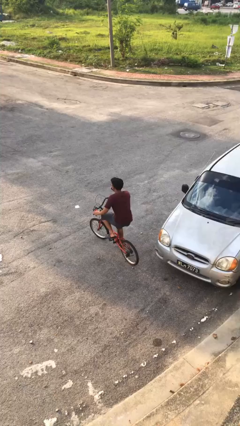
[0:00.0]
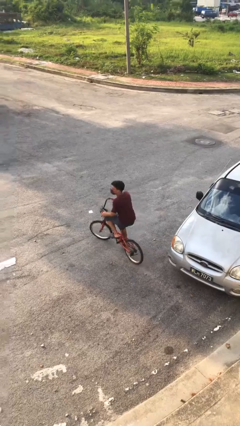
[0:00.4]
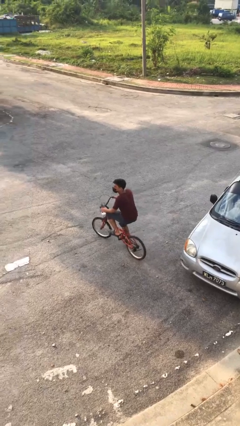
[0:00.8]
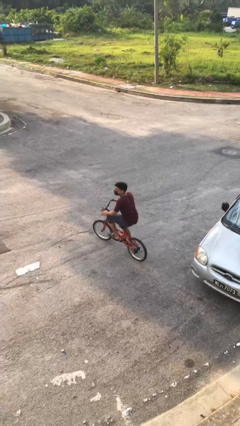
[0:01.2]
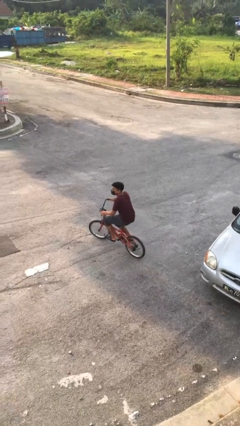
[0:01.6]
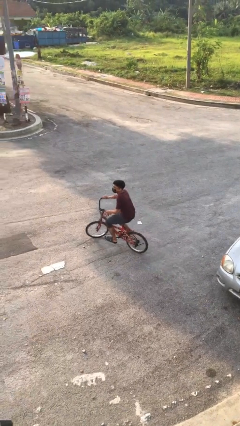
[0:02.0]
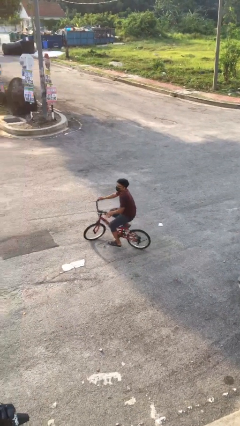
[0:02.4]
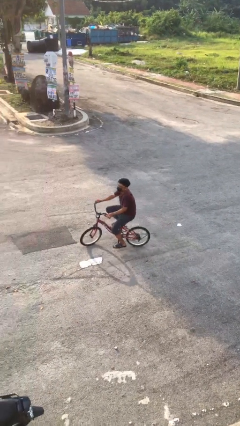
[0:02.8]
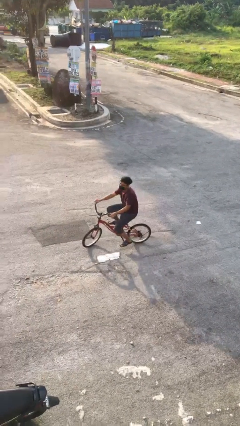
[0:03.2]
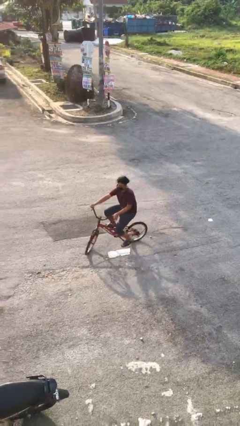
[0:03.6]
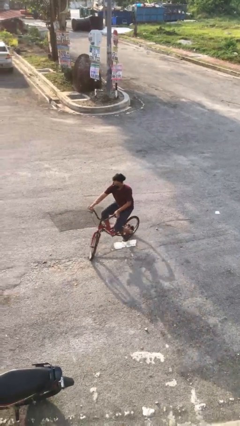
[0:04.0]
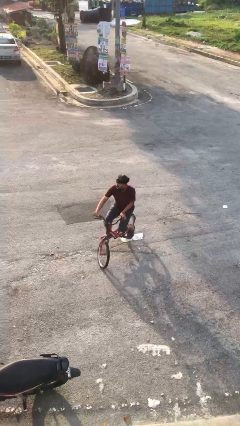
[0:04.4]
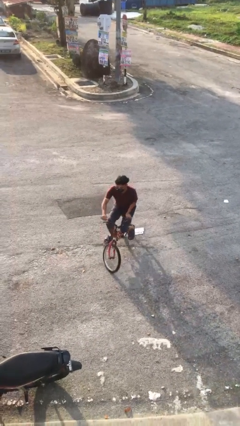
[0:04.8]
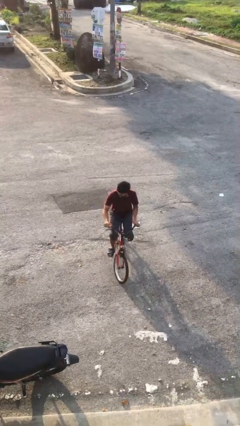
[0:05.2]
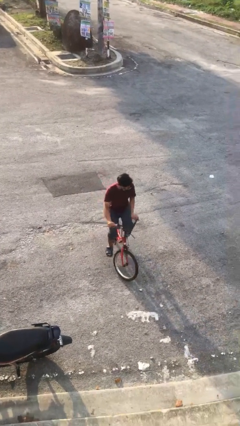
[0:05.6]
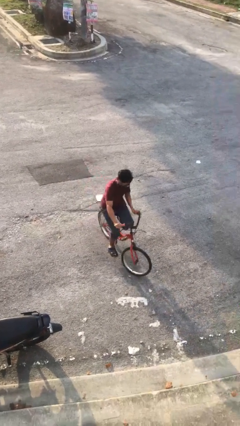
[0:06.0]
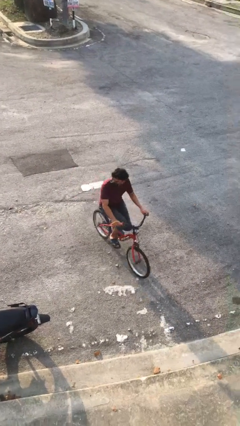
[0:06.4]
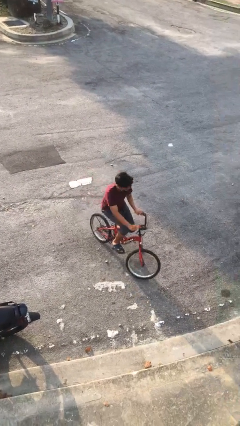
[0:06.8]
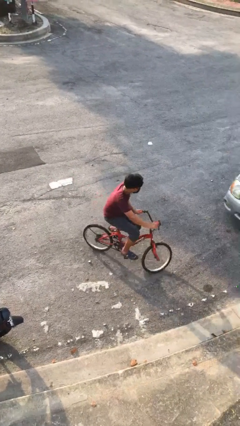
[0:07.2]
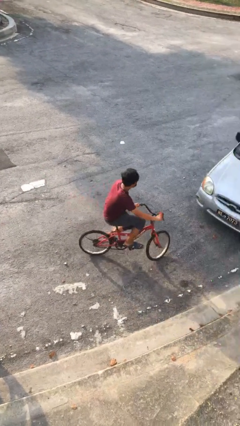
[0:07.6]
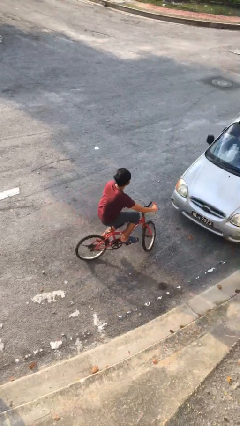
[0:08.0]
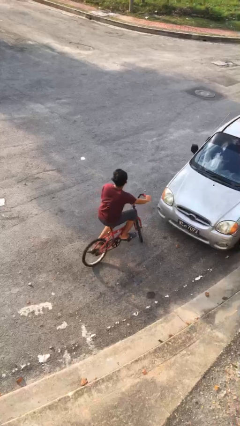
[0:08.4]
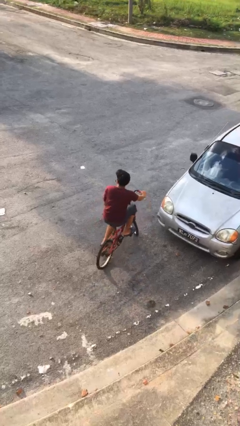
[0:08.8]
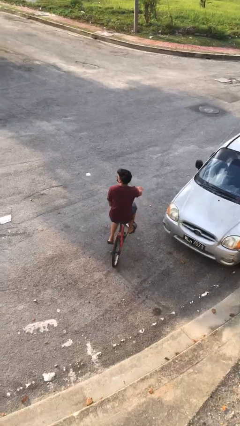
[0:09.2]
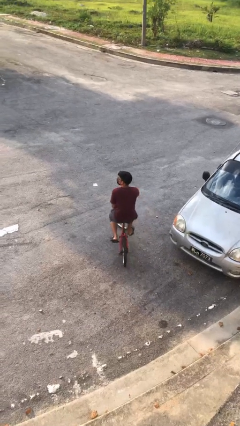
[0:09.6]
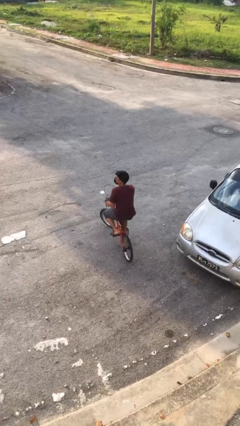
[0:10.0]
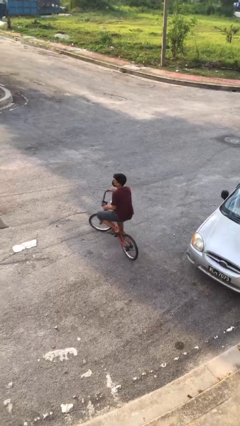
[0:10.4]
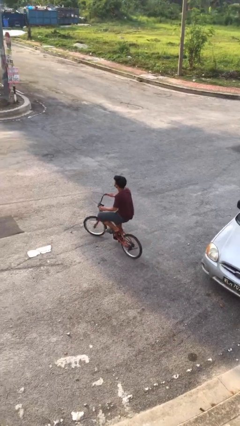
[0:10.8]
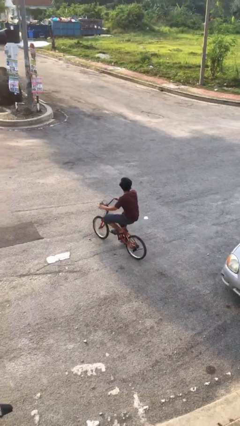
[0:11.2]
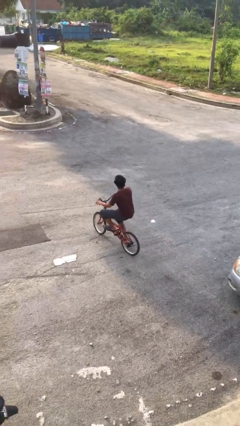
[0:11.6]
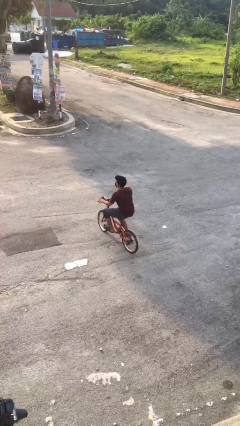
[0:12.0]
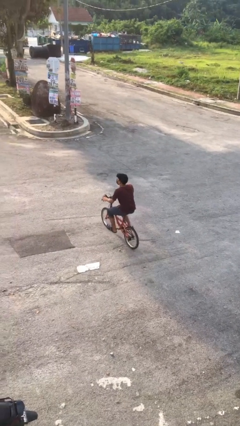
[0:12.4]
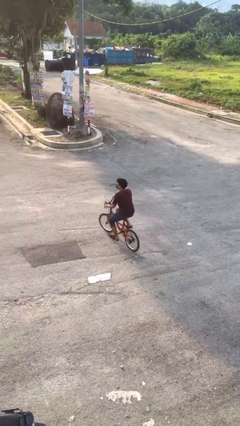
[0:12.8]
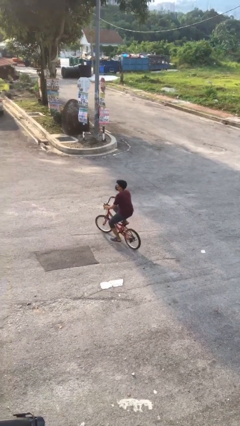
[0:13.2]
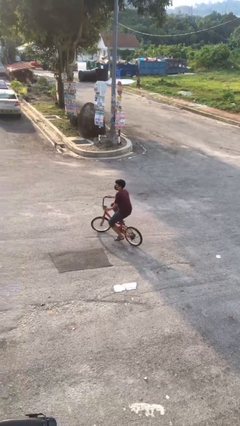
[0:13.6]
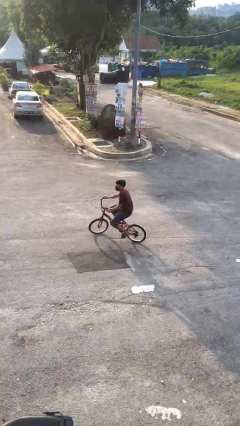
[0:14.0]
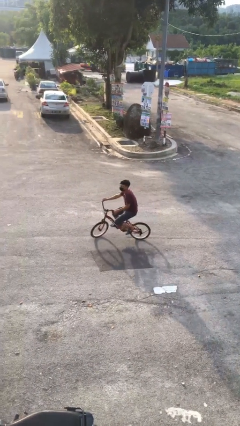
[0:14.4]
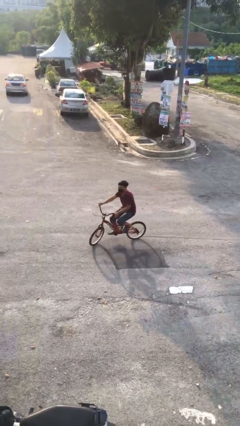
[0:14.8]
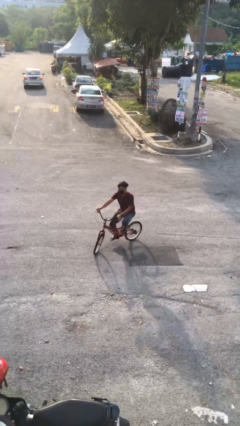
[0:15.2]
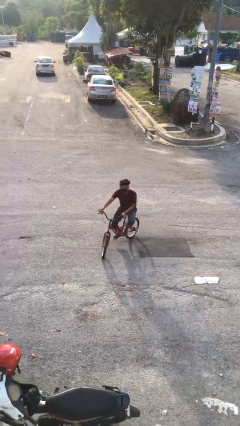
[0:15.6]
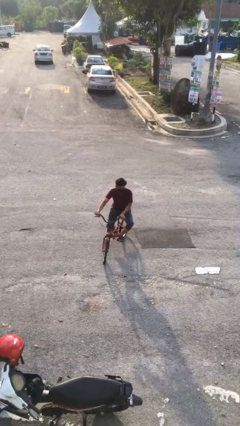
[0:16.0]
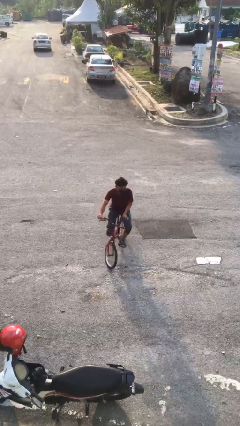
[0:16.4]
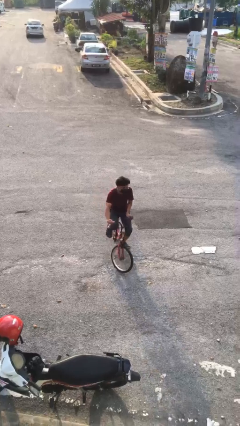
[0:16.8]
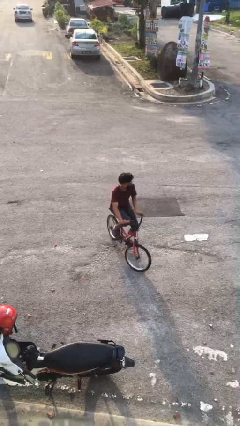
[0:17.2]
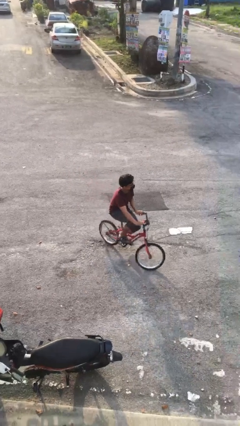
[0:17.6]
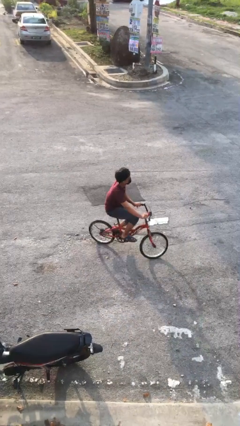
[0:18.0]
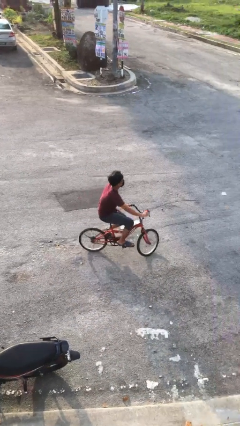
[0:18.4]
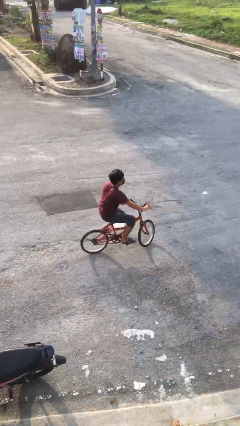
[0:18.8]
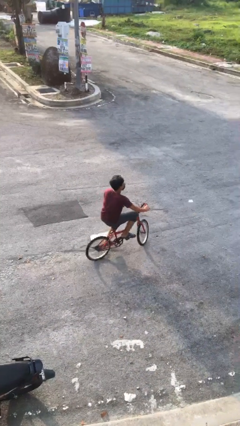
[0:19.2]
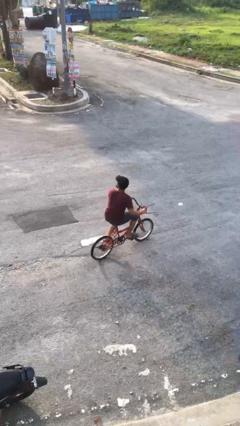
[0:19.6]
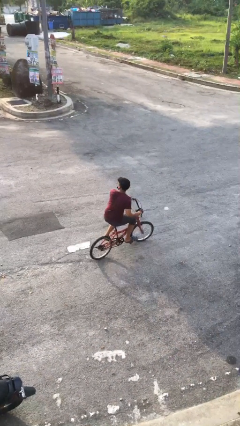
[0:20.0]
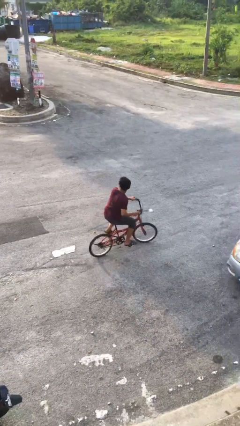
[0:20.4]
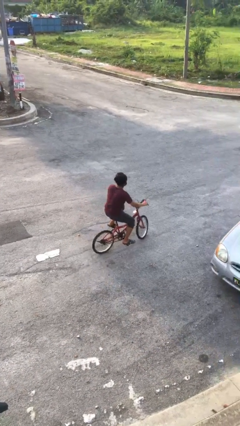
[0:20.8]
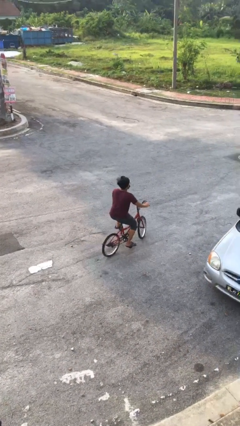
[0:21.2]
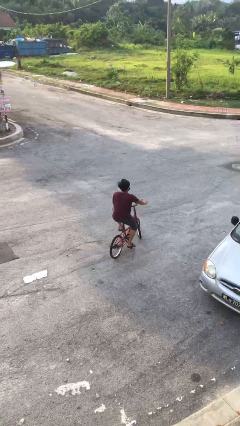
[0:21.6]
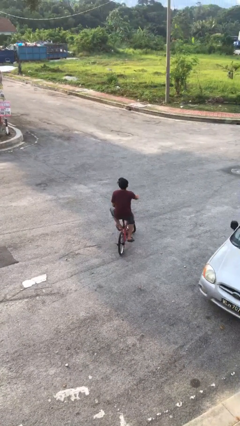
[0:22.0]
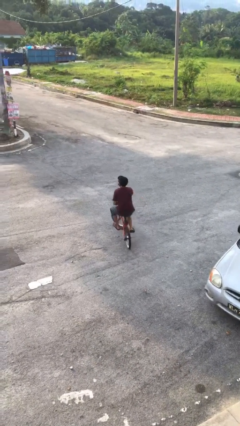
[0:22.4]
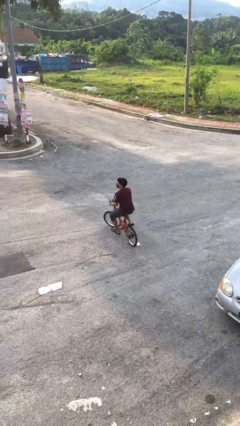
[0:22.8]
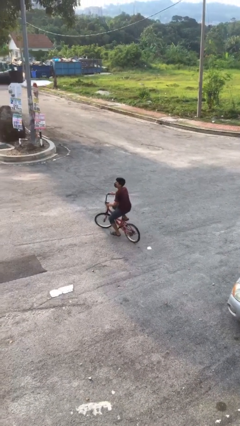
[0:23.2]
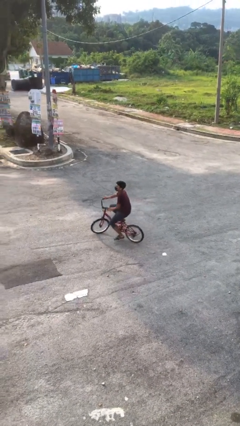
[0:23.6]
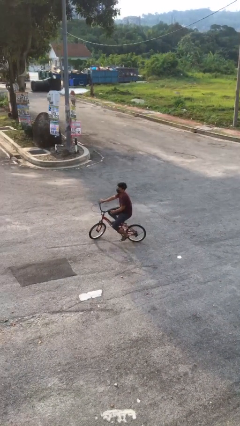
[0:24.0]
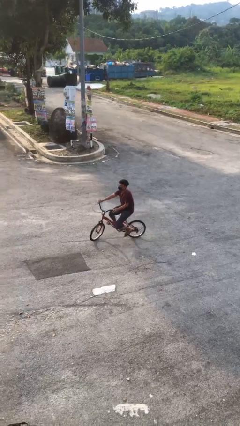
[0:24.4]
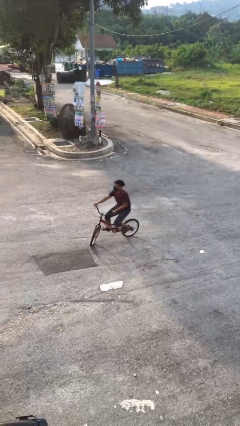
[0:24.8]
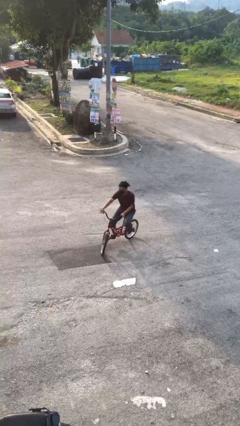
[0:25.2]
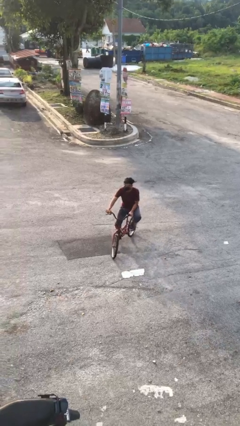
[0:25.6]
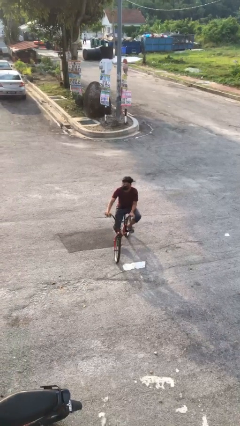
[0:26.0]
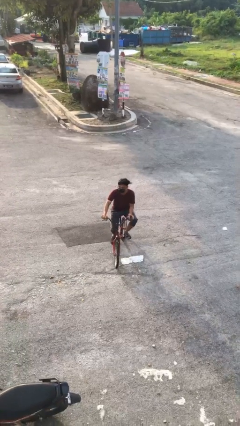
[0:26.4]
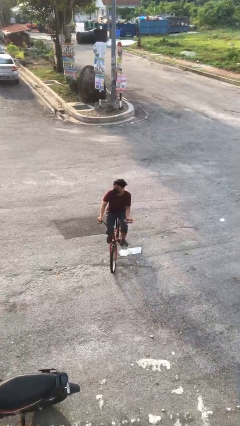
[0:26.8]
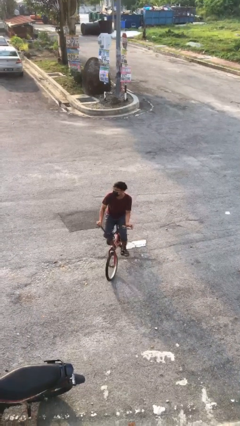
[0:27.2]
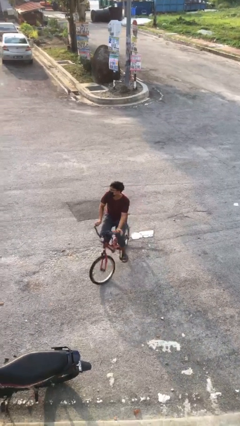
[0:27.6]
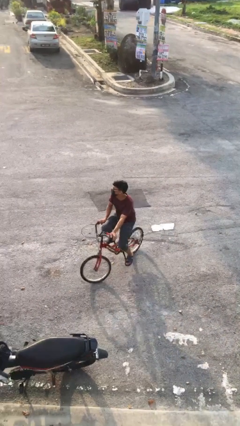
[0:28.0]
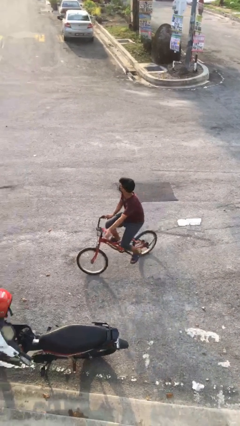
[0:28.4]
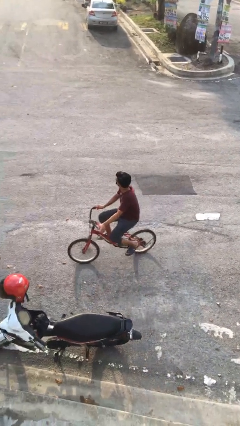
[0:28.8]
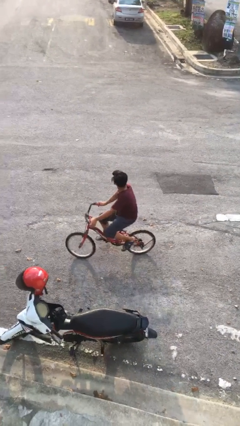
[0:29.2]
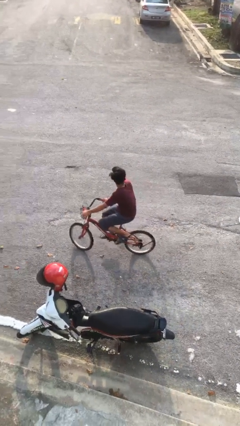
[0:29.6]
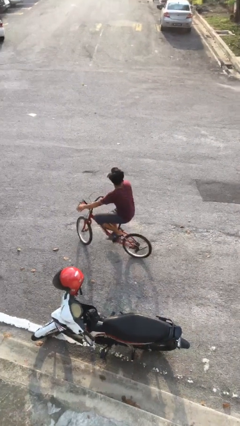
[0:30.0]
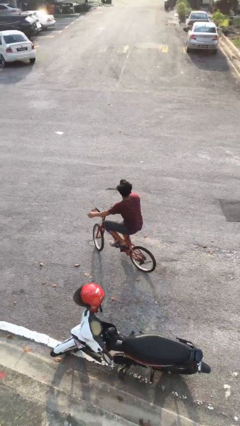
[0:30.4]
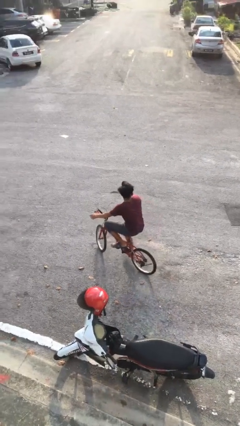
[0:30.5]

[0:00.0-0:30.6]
person rides bicycle

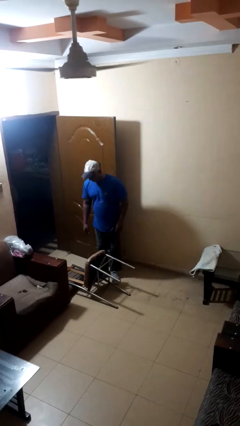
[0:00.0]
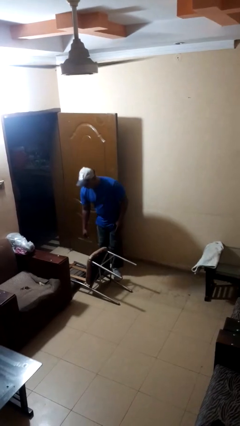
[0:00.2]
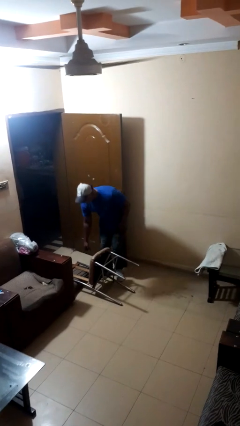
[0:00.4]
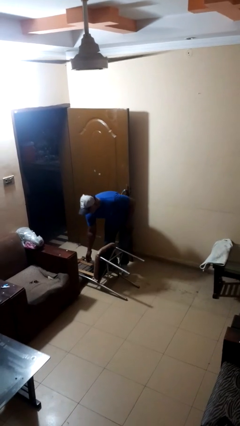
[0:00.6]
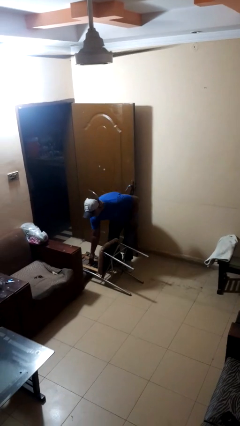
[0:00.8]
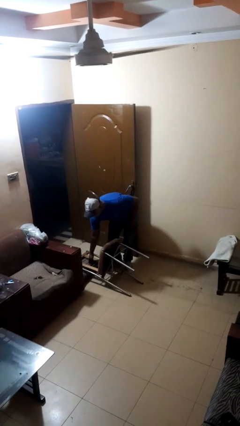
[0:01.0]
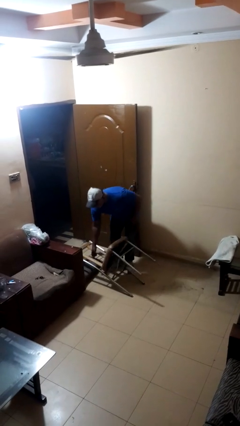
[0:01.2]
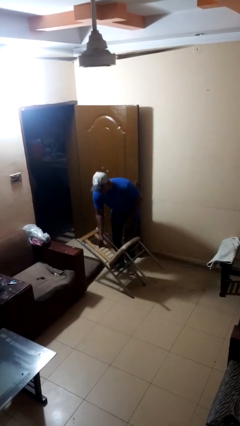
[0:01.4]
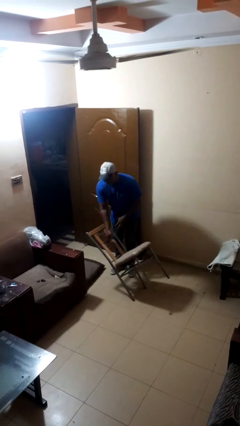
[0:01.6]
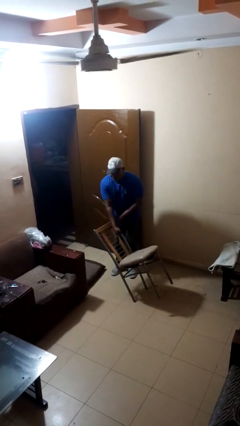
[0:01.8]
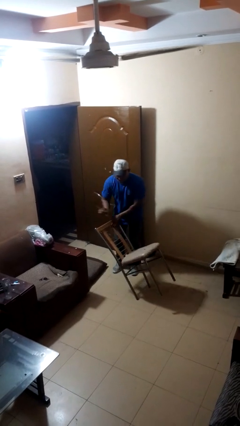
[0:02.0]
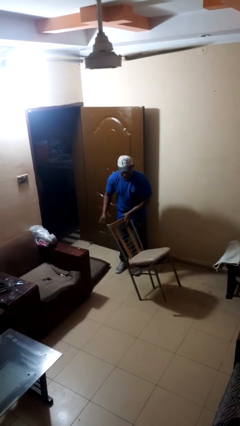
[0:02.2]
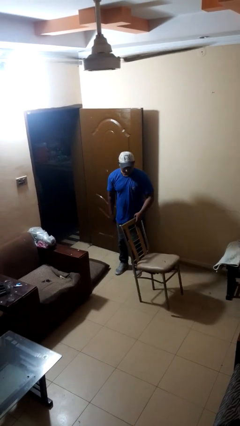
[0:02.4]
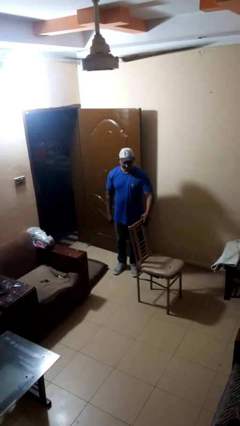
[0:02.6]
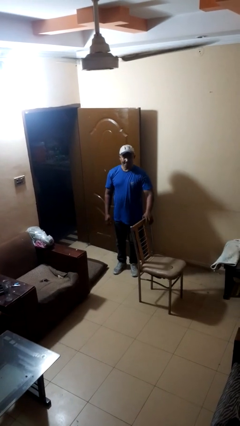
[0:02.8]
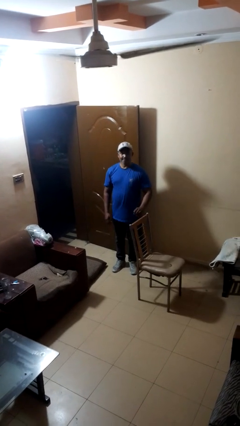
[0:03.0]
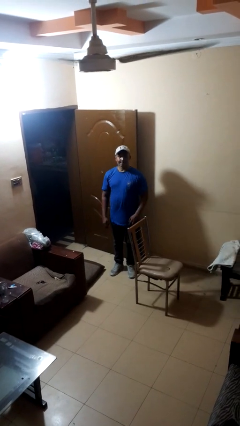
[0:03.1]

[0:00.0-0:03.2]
person sets upright furniture
